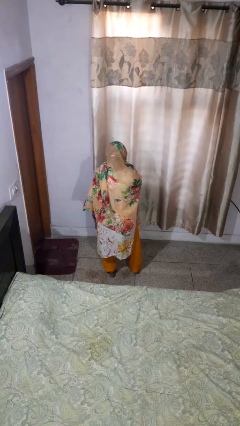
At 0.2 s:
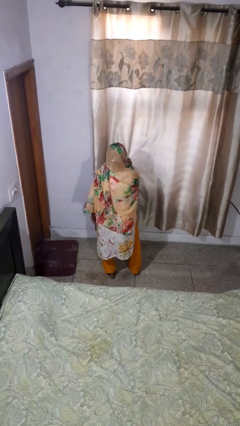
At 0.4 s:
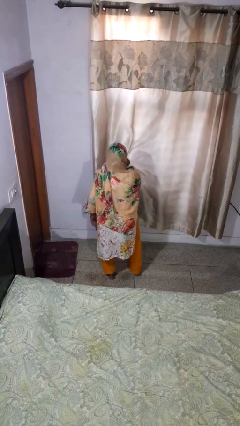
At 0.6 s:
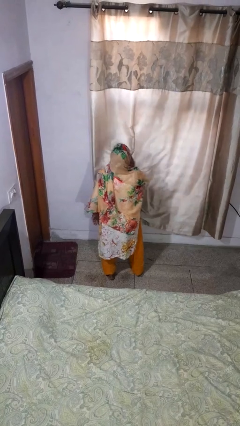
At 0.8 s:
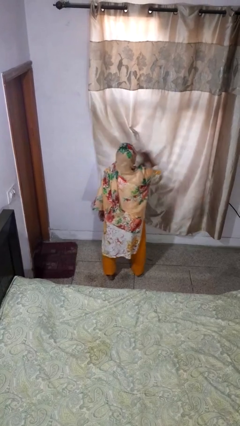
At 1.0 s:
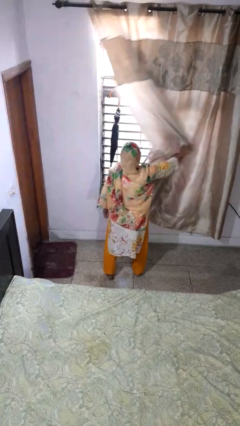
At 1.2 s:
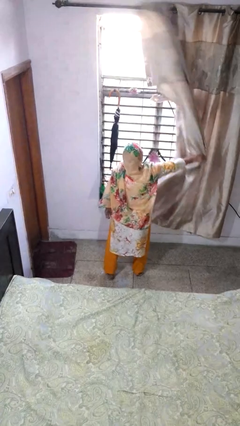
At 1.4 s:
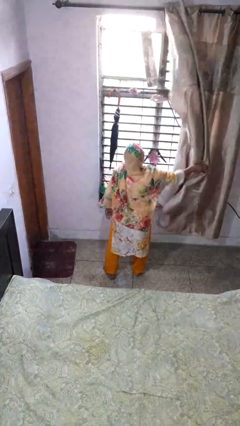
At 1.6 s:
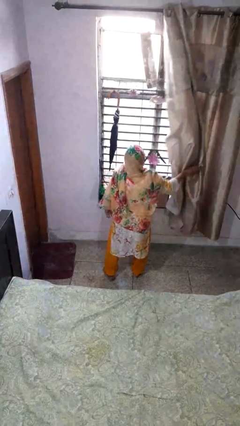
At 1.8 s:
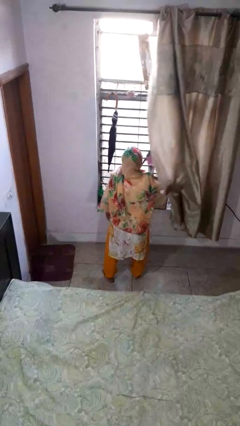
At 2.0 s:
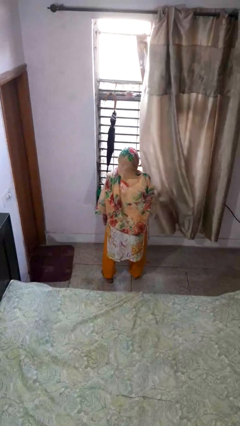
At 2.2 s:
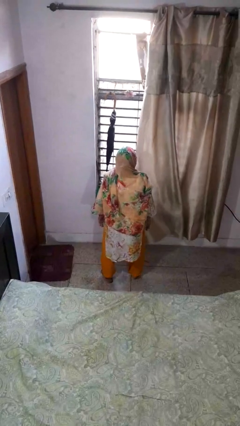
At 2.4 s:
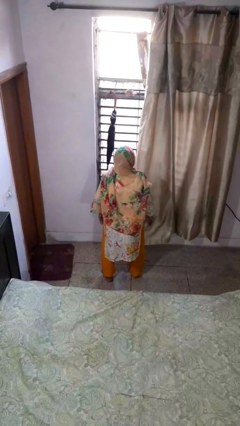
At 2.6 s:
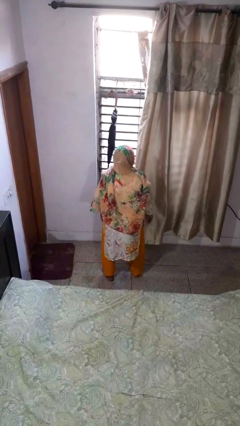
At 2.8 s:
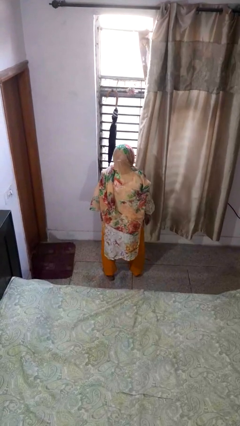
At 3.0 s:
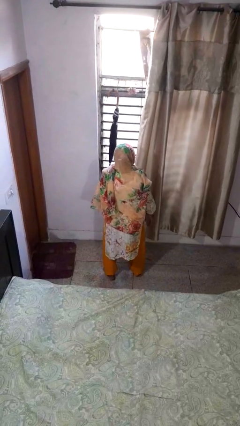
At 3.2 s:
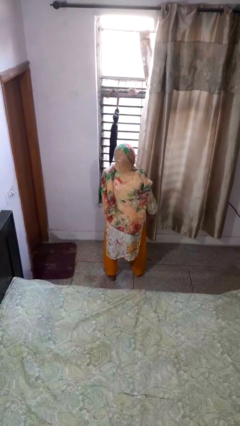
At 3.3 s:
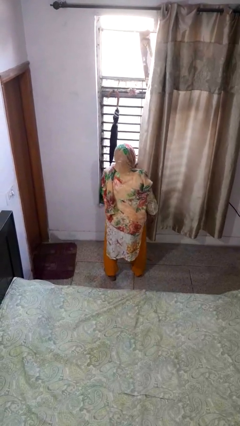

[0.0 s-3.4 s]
person opens curtains

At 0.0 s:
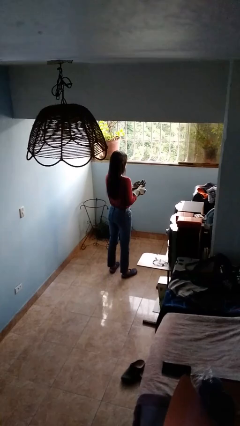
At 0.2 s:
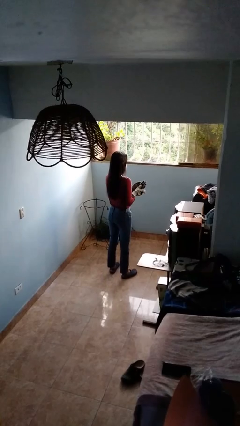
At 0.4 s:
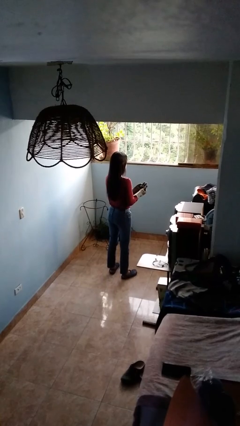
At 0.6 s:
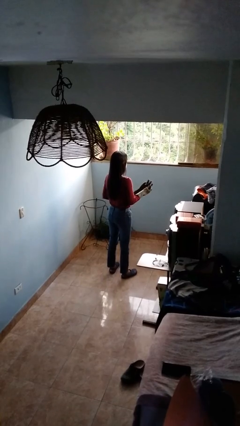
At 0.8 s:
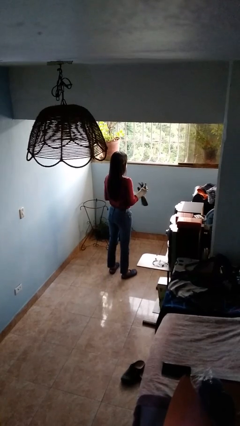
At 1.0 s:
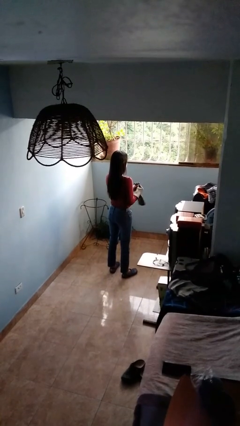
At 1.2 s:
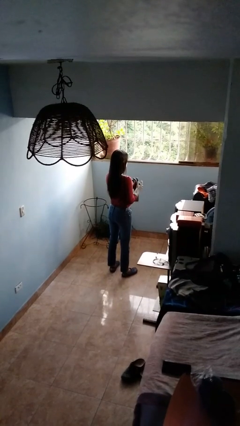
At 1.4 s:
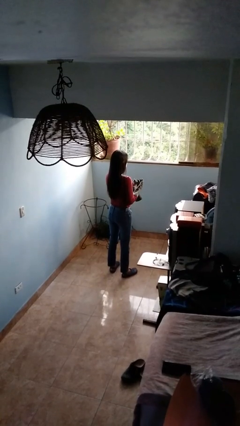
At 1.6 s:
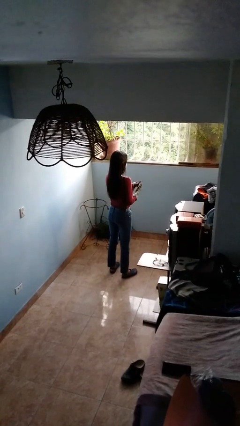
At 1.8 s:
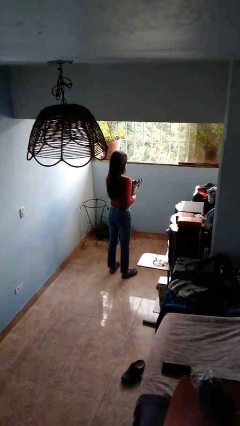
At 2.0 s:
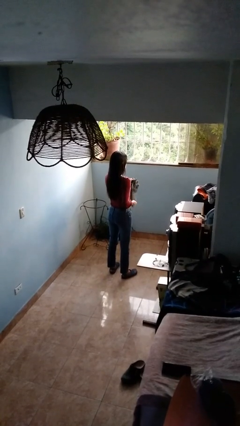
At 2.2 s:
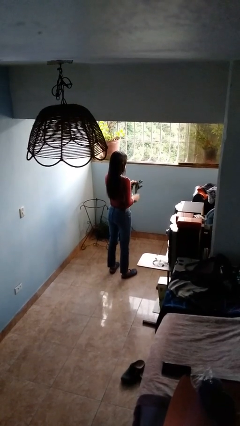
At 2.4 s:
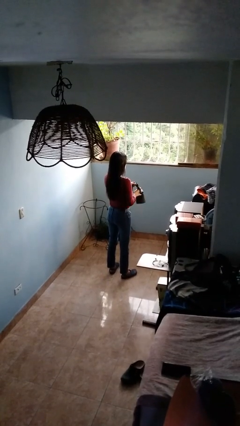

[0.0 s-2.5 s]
person takes off gloves

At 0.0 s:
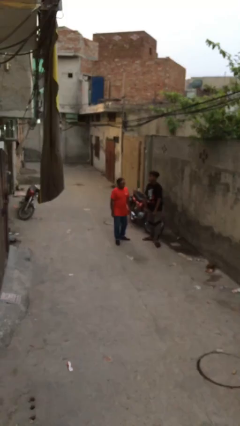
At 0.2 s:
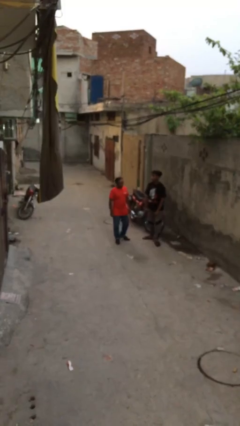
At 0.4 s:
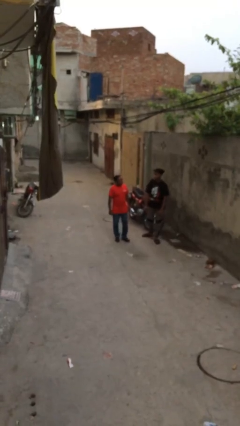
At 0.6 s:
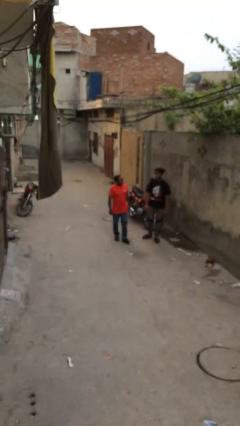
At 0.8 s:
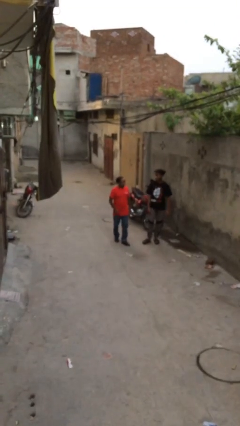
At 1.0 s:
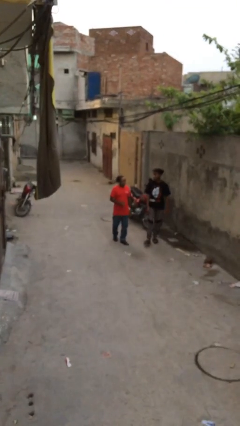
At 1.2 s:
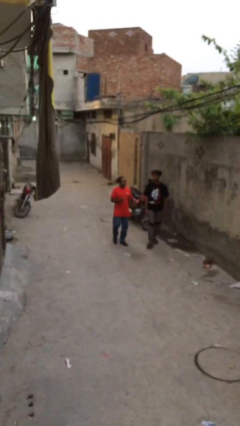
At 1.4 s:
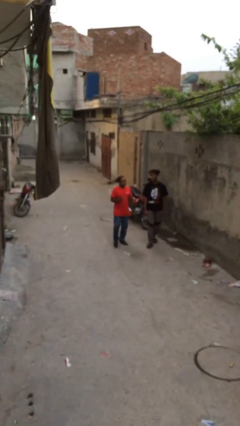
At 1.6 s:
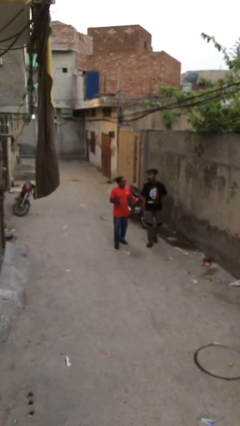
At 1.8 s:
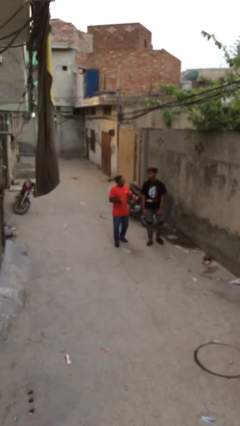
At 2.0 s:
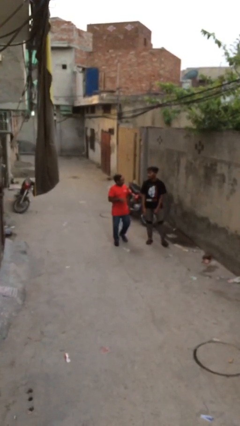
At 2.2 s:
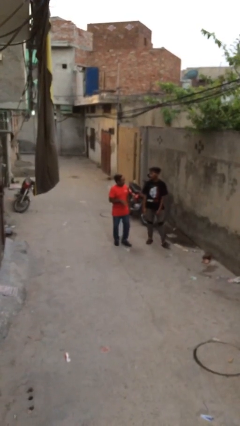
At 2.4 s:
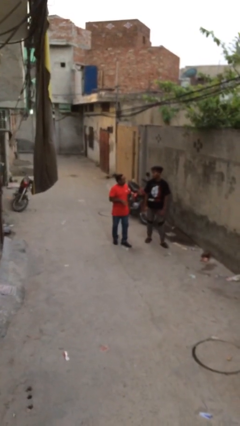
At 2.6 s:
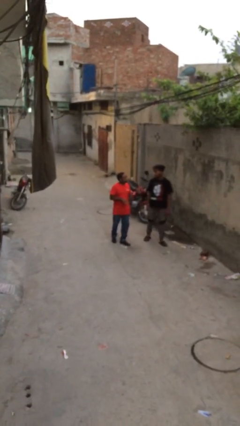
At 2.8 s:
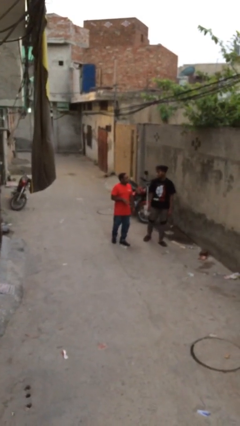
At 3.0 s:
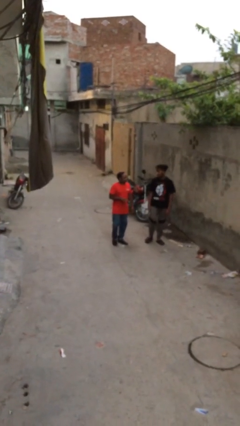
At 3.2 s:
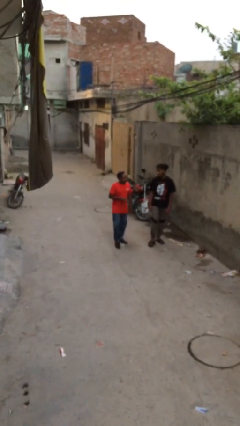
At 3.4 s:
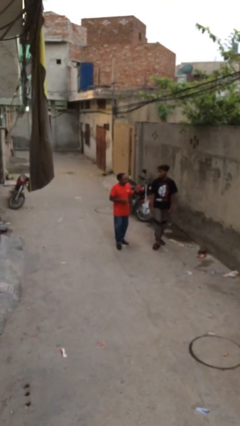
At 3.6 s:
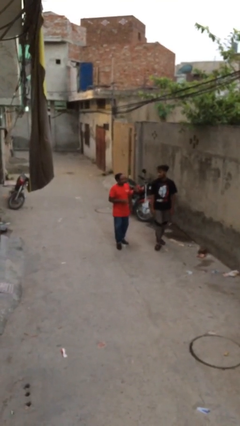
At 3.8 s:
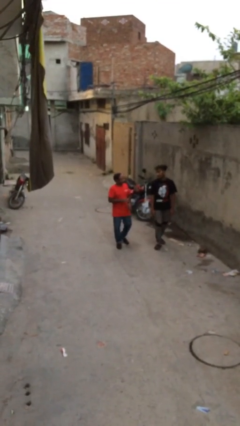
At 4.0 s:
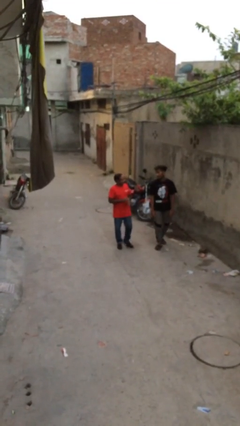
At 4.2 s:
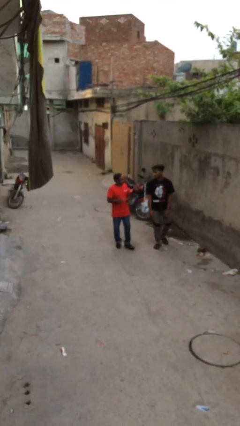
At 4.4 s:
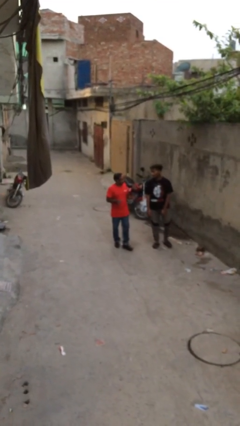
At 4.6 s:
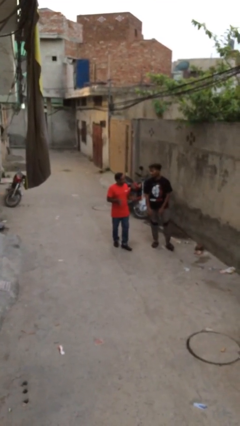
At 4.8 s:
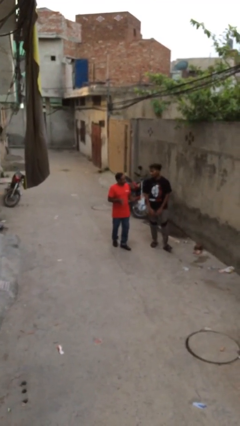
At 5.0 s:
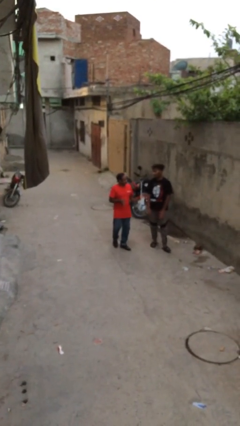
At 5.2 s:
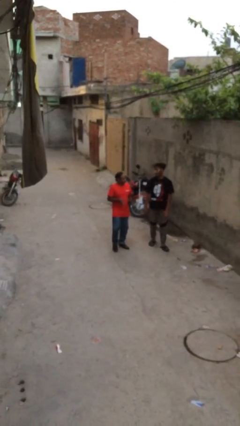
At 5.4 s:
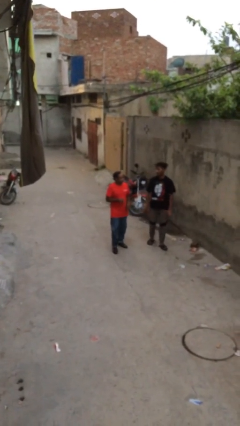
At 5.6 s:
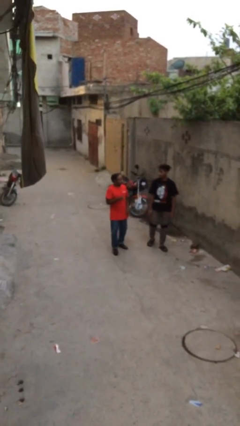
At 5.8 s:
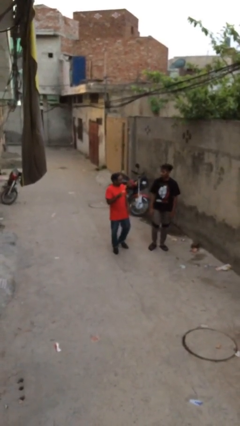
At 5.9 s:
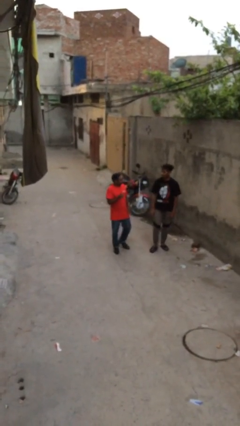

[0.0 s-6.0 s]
person talks to person

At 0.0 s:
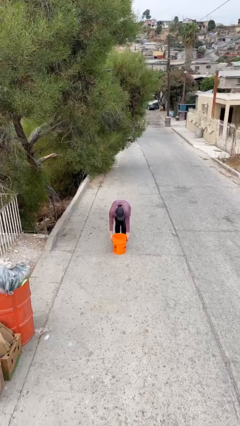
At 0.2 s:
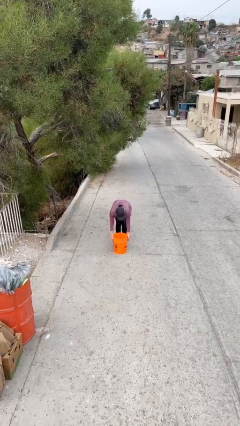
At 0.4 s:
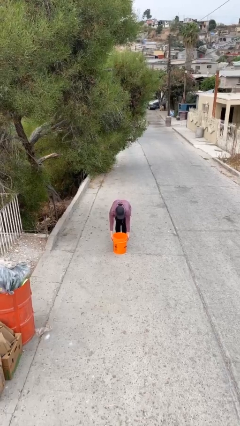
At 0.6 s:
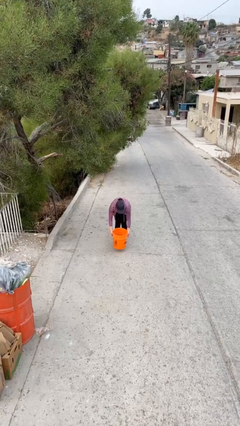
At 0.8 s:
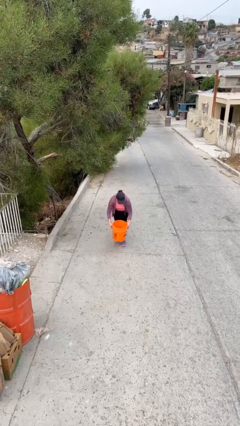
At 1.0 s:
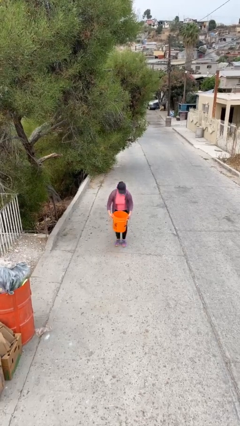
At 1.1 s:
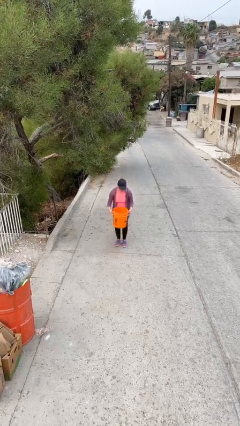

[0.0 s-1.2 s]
person picks up object from floor

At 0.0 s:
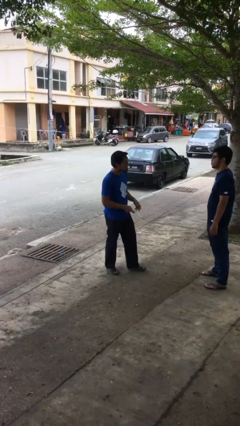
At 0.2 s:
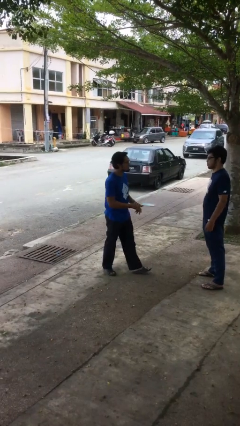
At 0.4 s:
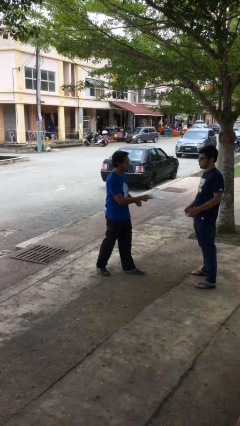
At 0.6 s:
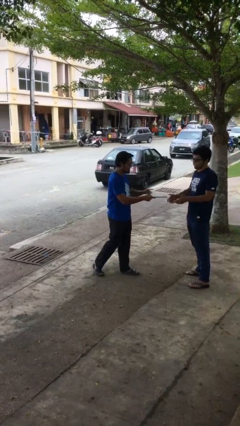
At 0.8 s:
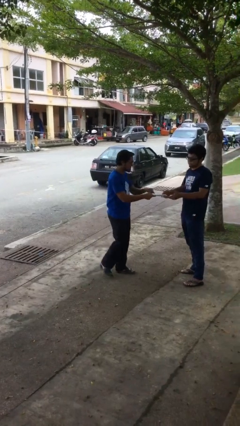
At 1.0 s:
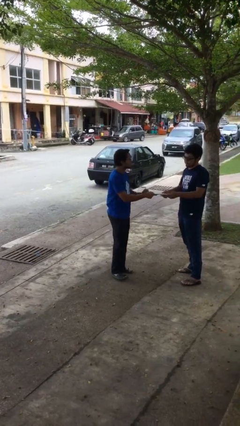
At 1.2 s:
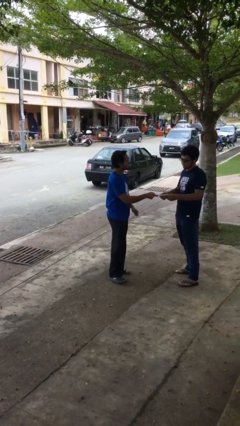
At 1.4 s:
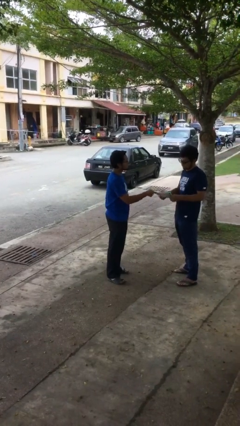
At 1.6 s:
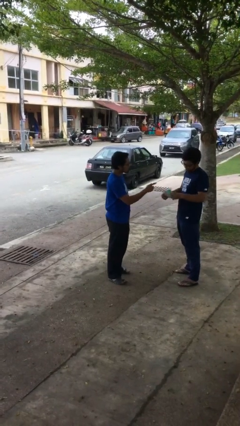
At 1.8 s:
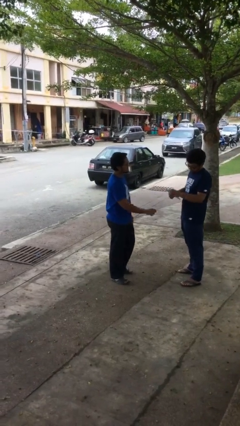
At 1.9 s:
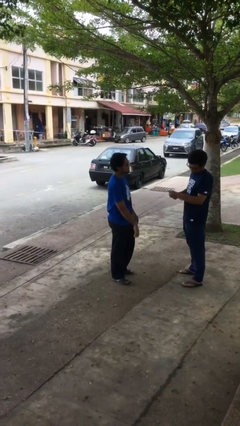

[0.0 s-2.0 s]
person transfers object to person

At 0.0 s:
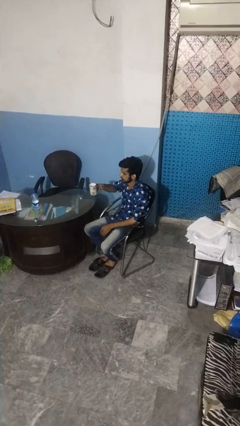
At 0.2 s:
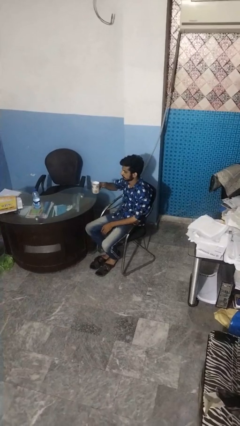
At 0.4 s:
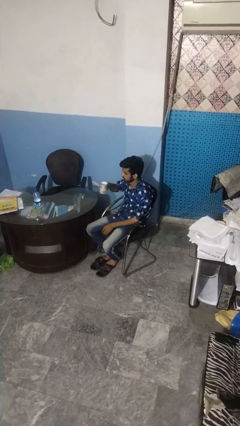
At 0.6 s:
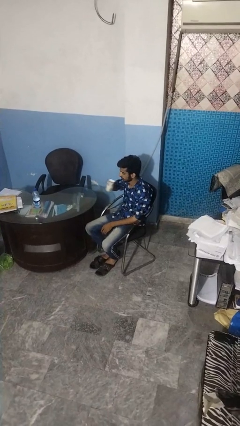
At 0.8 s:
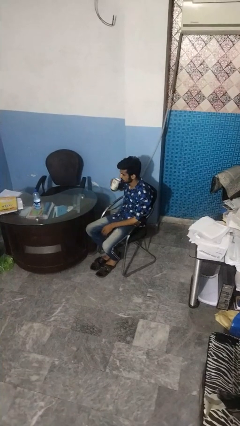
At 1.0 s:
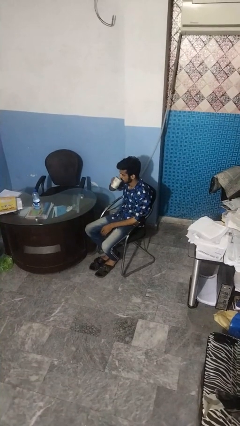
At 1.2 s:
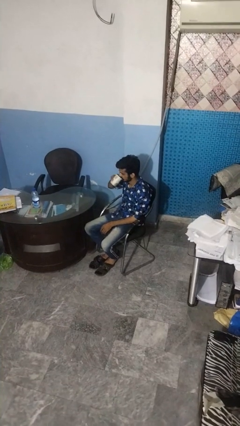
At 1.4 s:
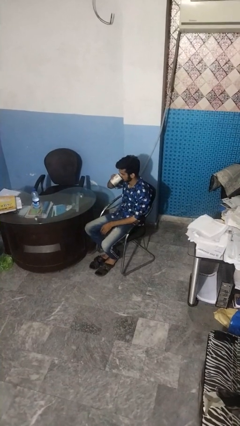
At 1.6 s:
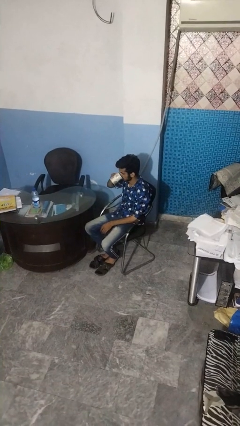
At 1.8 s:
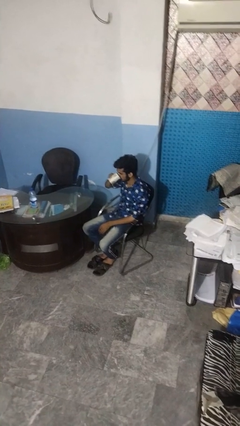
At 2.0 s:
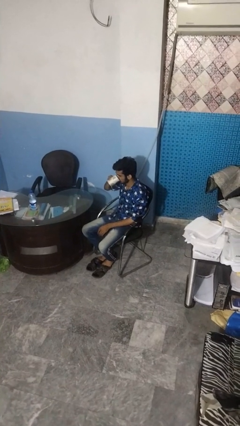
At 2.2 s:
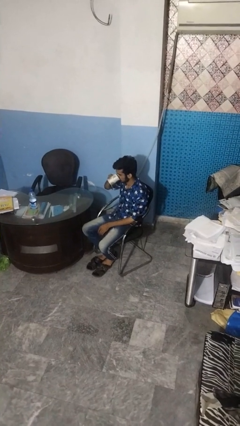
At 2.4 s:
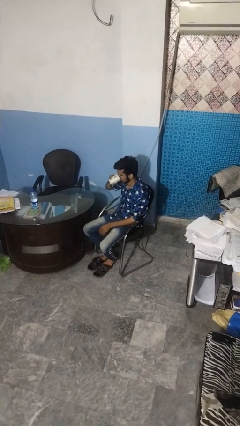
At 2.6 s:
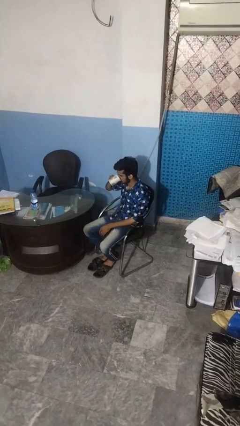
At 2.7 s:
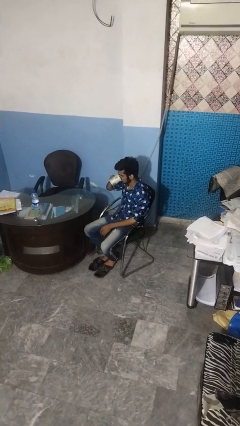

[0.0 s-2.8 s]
person drinks from mug
